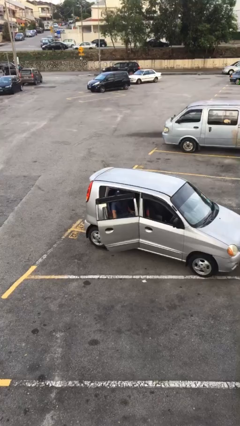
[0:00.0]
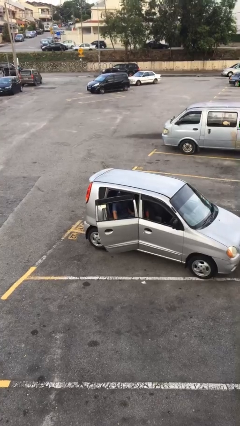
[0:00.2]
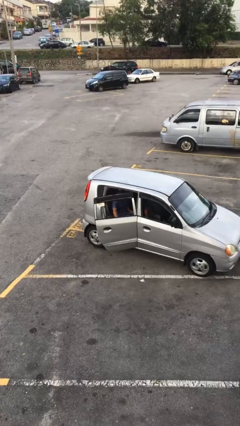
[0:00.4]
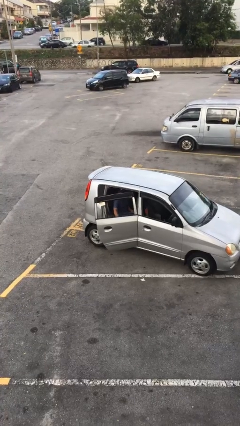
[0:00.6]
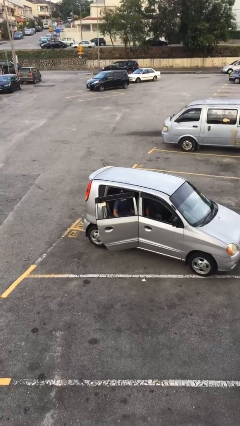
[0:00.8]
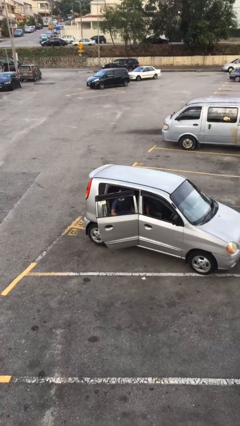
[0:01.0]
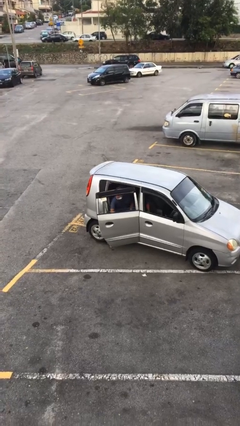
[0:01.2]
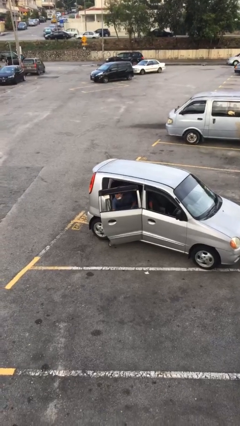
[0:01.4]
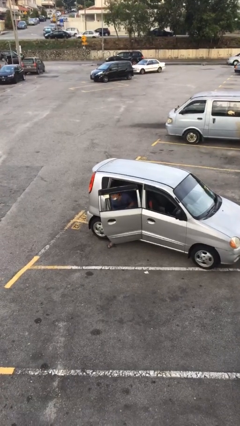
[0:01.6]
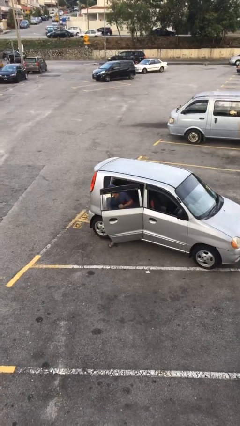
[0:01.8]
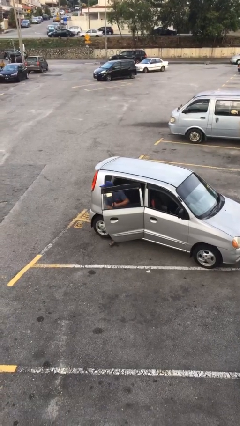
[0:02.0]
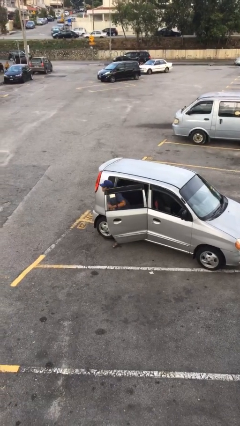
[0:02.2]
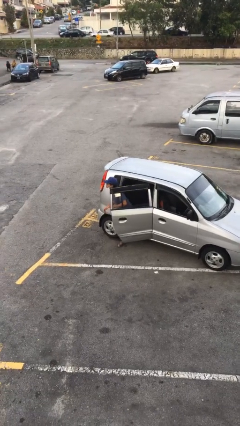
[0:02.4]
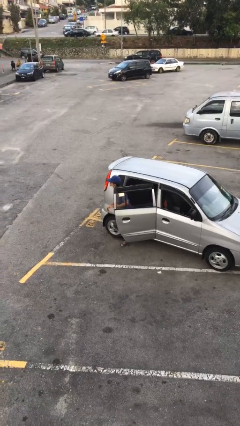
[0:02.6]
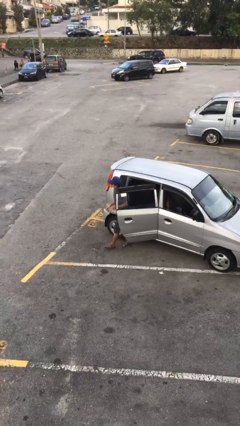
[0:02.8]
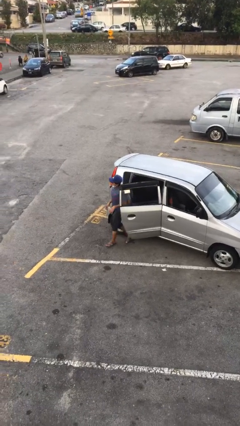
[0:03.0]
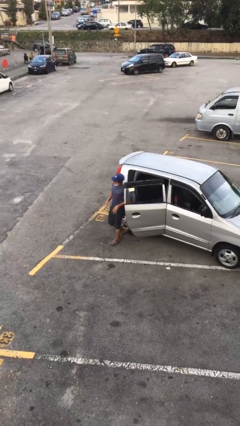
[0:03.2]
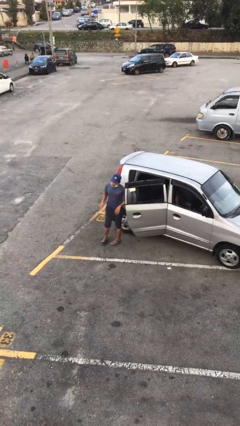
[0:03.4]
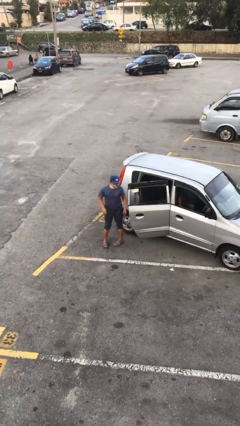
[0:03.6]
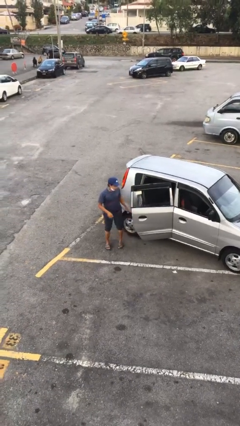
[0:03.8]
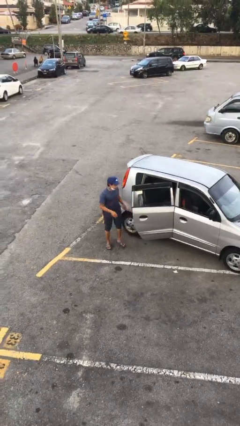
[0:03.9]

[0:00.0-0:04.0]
person exits car

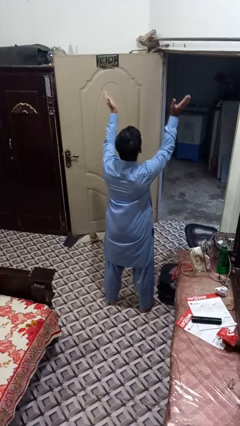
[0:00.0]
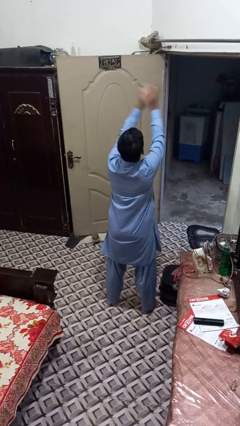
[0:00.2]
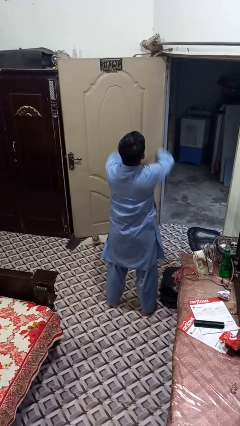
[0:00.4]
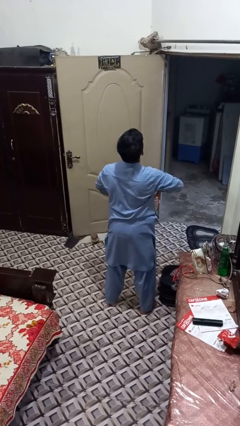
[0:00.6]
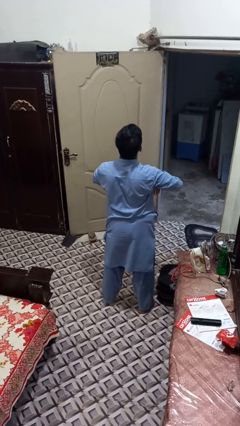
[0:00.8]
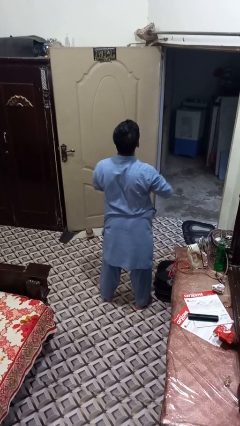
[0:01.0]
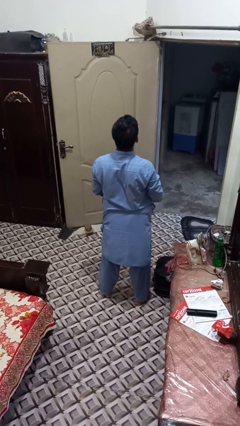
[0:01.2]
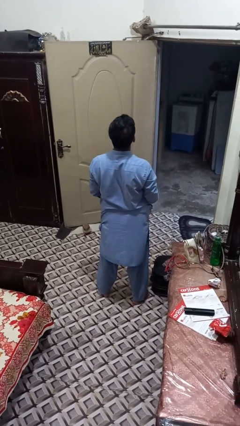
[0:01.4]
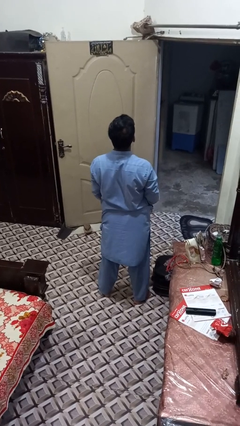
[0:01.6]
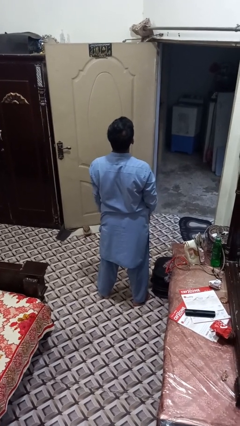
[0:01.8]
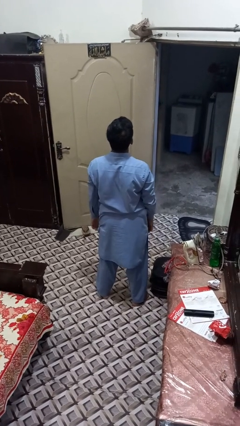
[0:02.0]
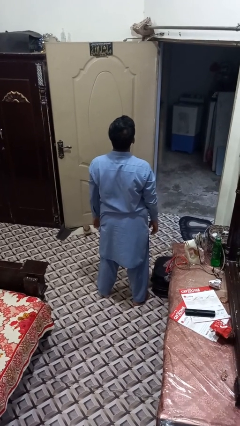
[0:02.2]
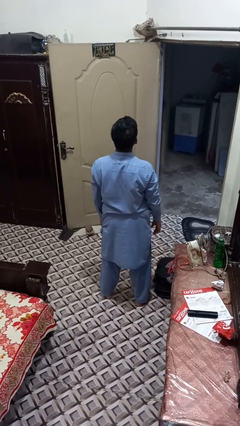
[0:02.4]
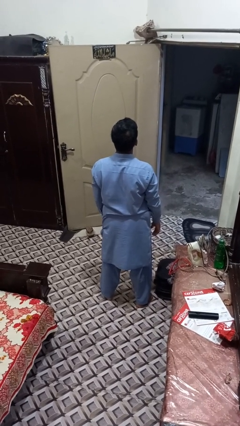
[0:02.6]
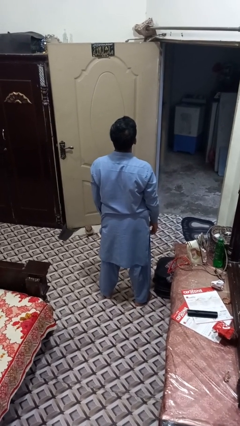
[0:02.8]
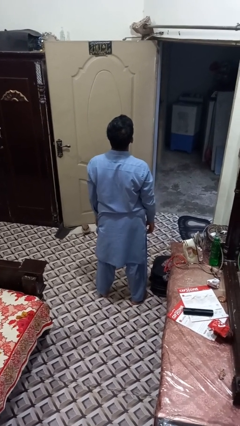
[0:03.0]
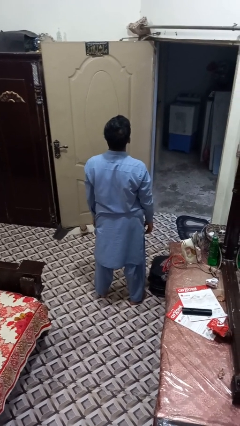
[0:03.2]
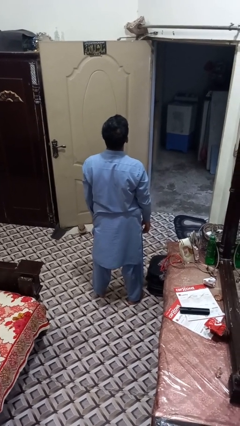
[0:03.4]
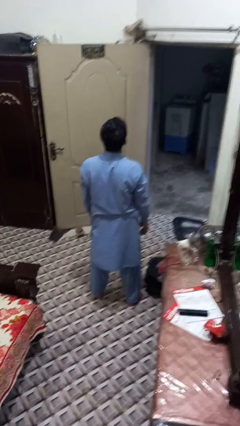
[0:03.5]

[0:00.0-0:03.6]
person swats bug

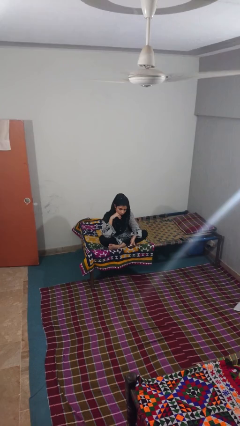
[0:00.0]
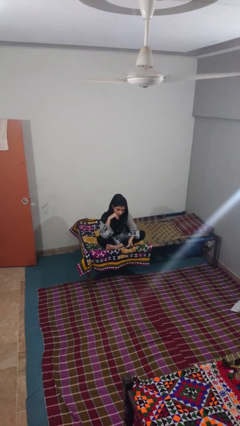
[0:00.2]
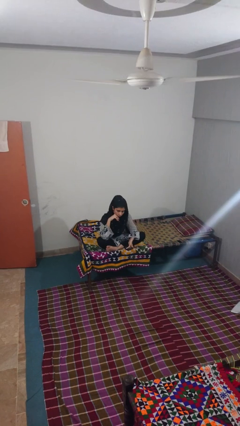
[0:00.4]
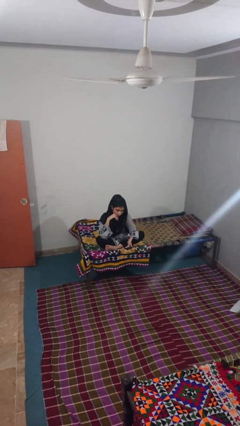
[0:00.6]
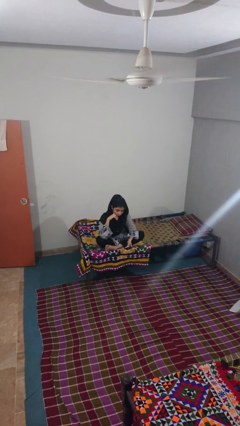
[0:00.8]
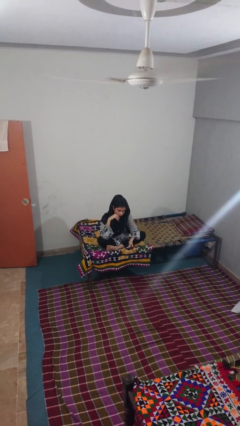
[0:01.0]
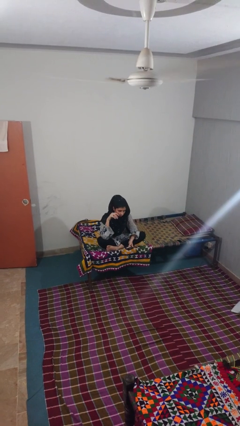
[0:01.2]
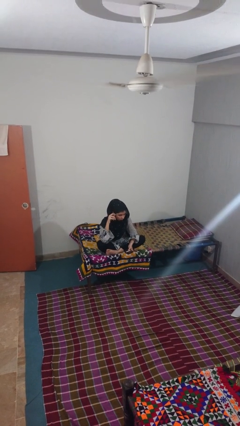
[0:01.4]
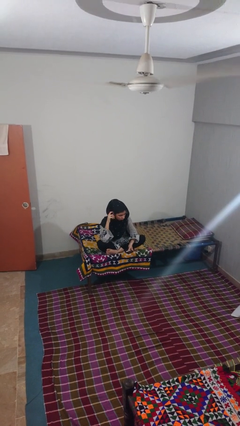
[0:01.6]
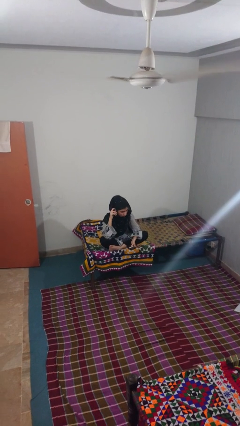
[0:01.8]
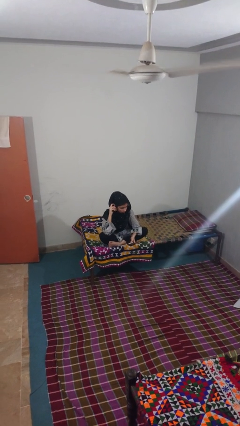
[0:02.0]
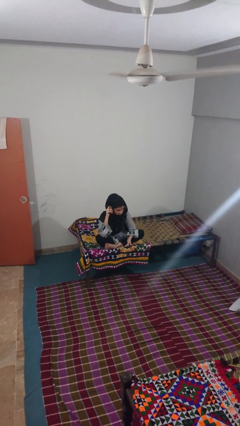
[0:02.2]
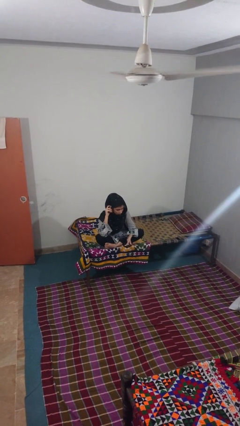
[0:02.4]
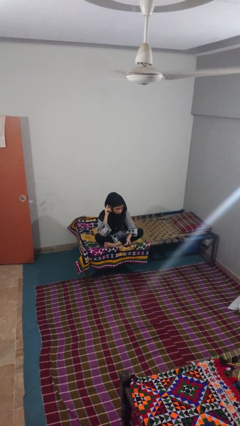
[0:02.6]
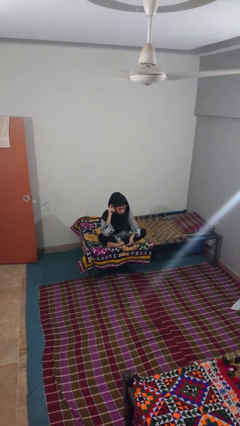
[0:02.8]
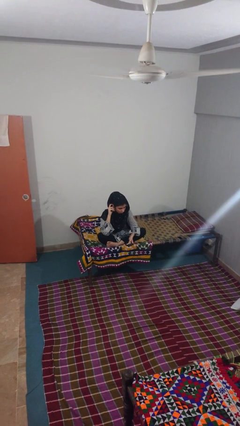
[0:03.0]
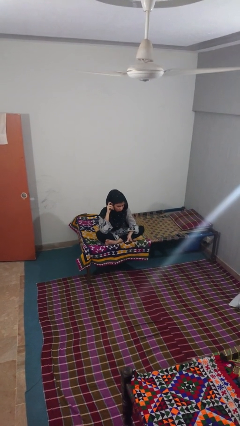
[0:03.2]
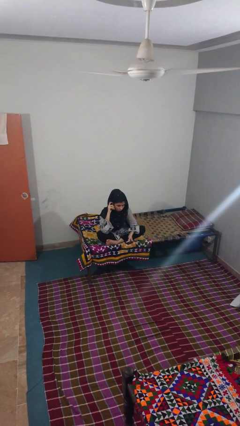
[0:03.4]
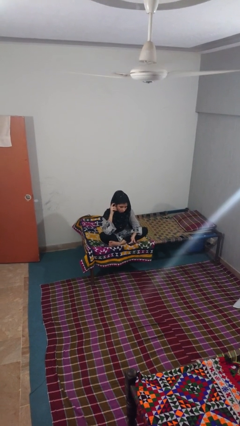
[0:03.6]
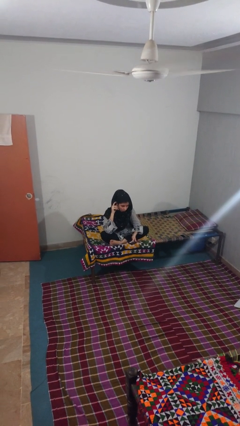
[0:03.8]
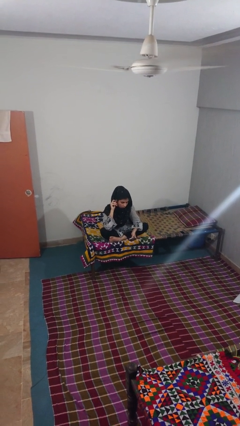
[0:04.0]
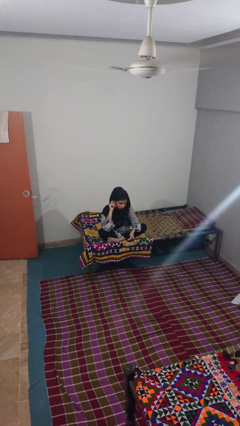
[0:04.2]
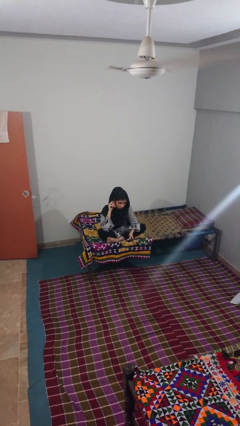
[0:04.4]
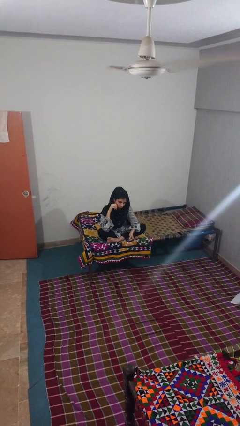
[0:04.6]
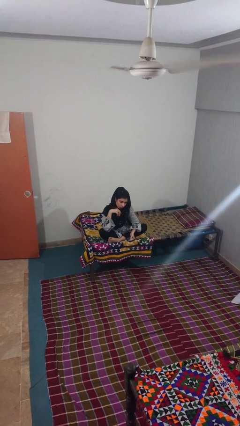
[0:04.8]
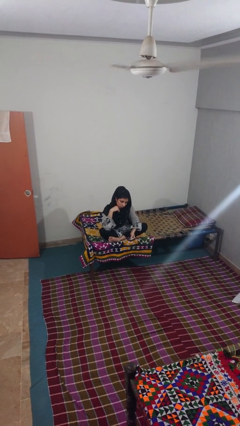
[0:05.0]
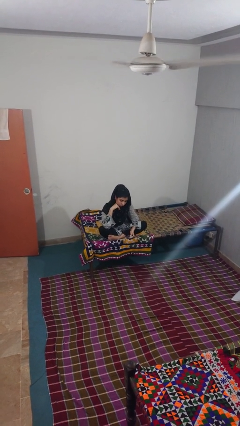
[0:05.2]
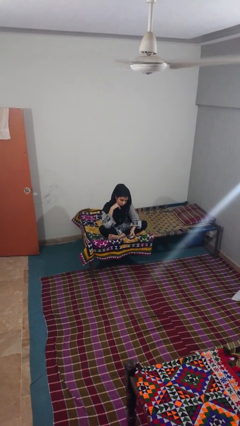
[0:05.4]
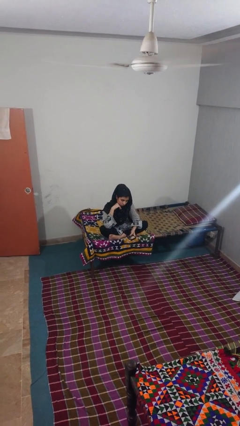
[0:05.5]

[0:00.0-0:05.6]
person touches earlobe

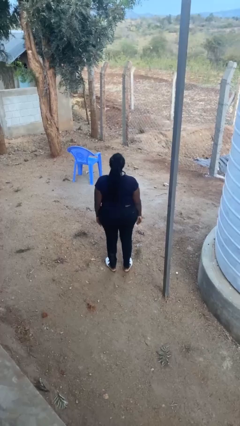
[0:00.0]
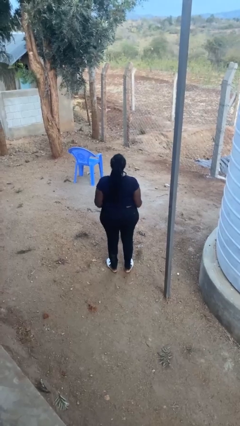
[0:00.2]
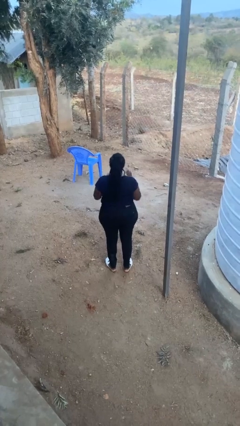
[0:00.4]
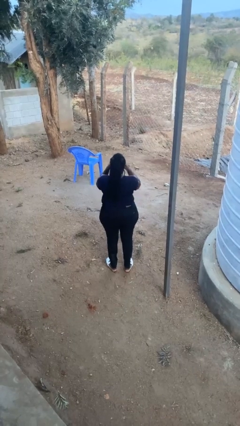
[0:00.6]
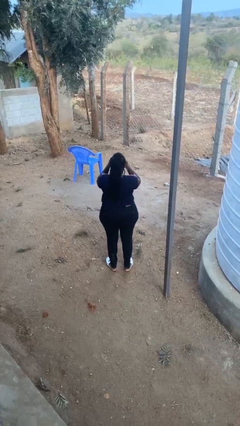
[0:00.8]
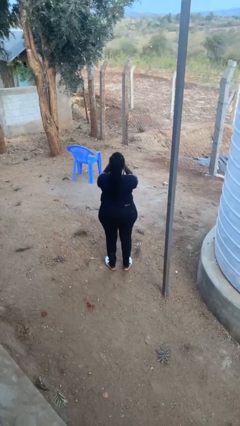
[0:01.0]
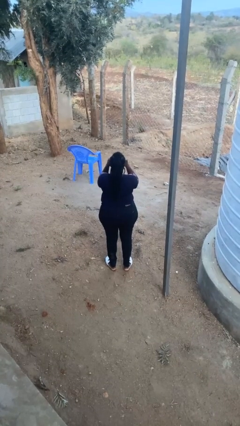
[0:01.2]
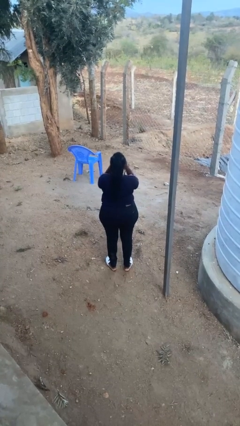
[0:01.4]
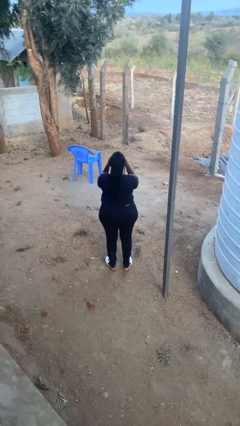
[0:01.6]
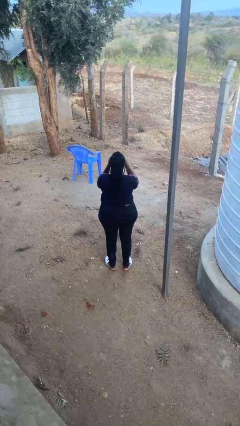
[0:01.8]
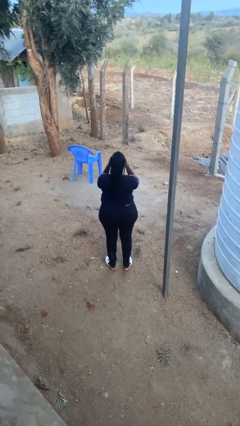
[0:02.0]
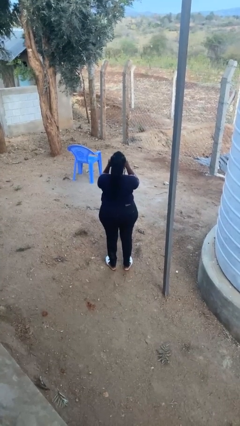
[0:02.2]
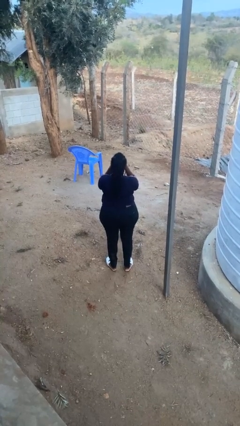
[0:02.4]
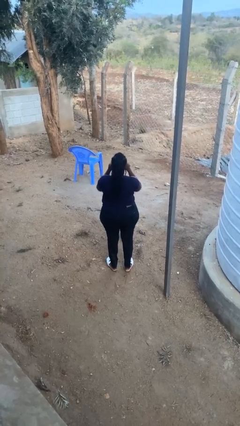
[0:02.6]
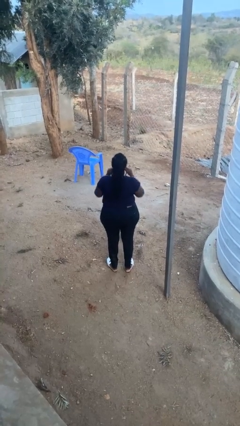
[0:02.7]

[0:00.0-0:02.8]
person rubs eyes

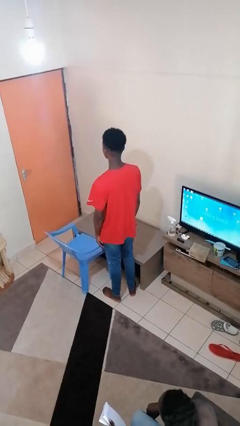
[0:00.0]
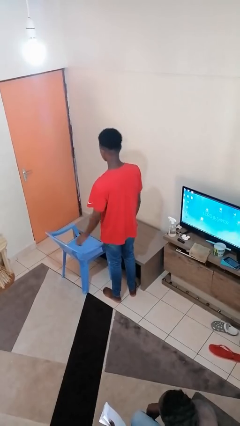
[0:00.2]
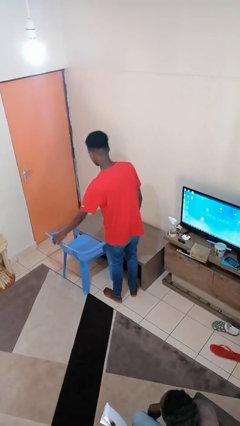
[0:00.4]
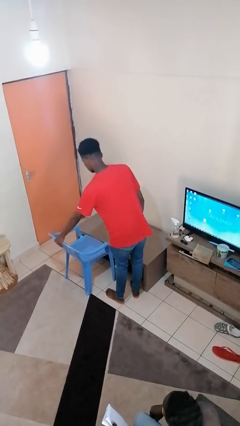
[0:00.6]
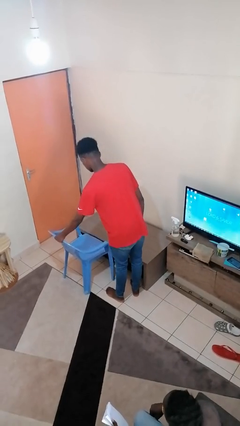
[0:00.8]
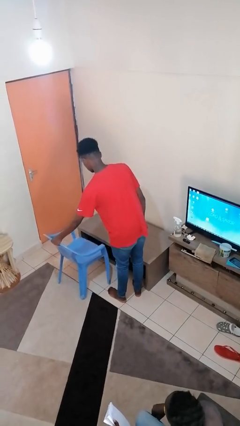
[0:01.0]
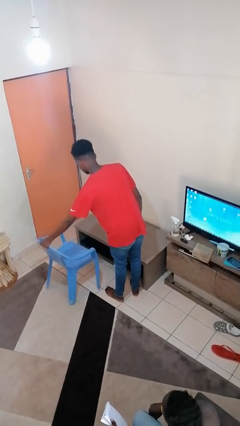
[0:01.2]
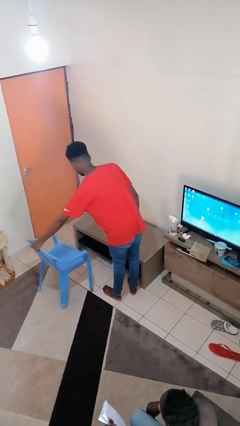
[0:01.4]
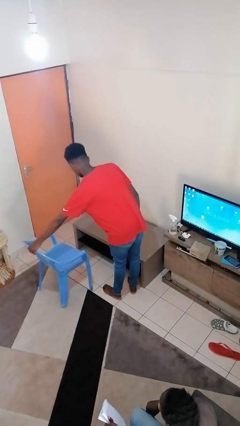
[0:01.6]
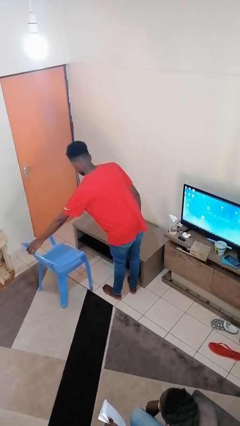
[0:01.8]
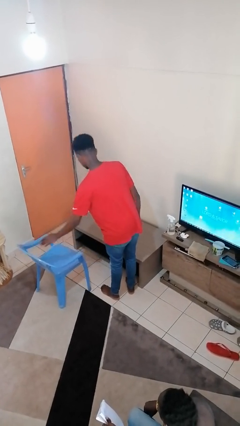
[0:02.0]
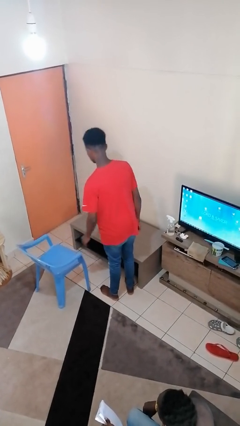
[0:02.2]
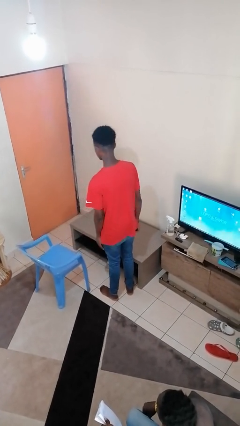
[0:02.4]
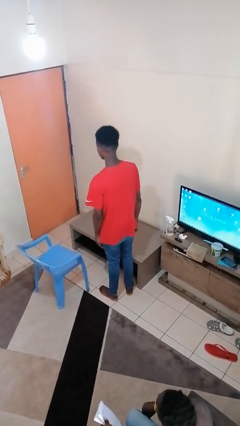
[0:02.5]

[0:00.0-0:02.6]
person pulls out chair
